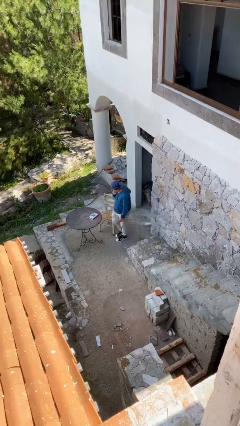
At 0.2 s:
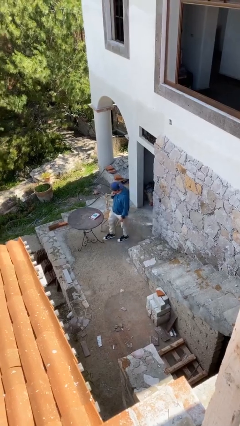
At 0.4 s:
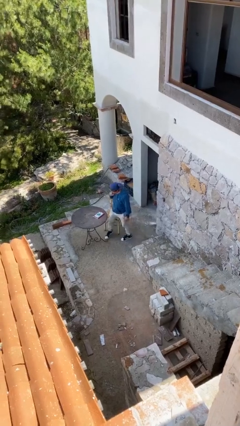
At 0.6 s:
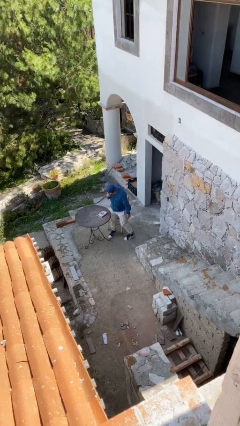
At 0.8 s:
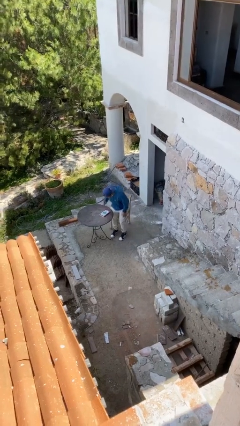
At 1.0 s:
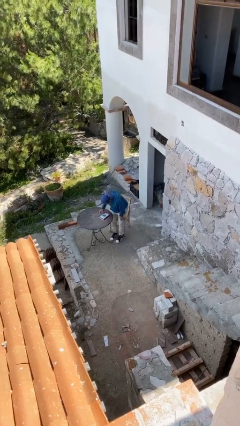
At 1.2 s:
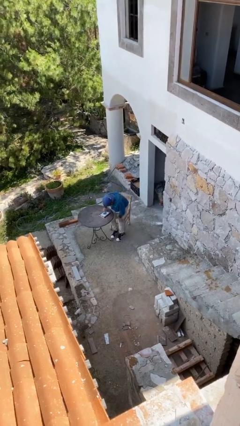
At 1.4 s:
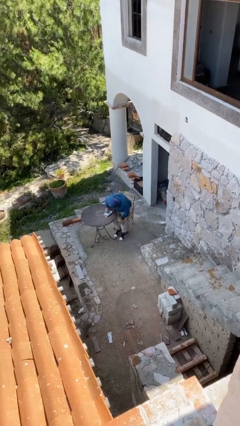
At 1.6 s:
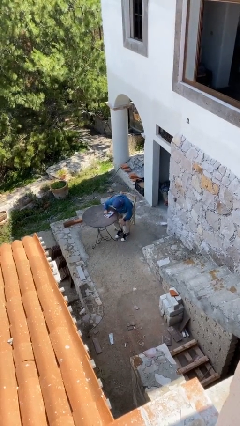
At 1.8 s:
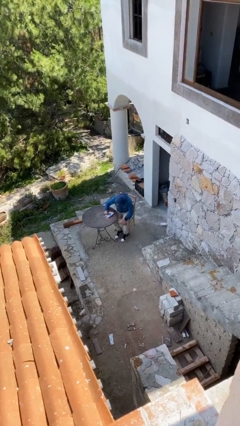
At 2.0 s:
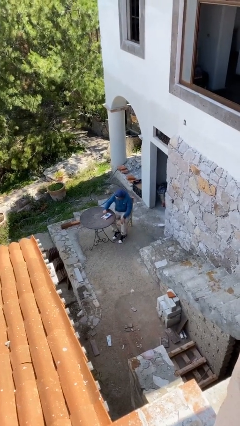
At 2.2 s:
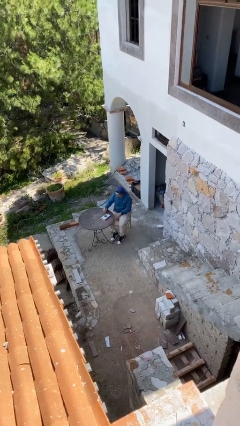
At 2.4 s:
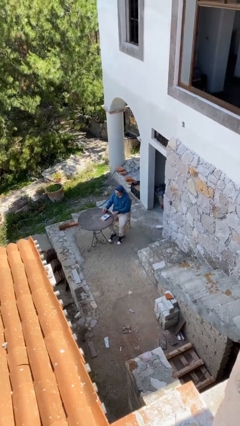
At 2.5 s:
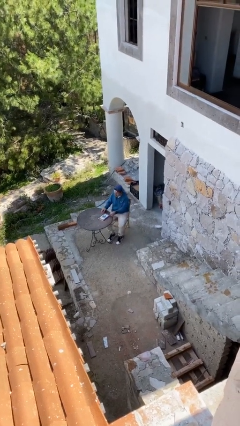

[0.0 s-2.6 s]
person sits down

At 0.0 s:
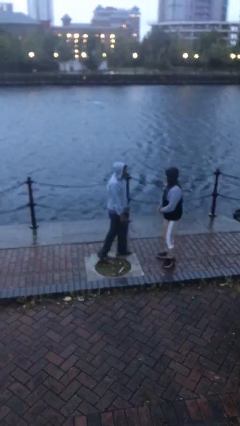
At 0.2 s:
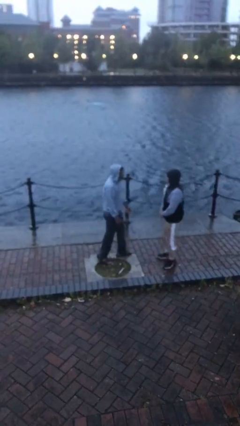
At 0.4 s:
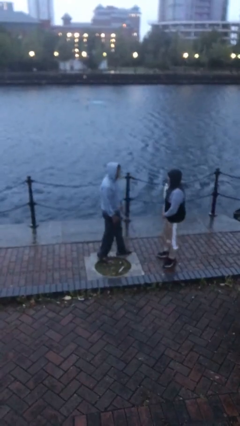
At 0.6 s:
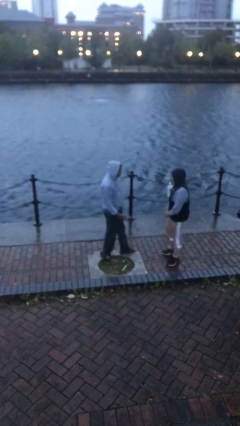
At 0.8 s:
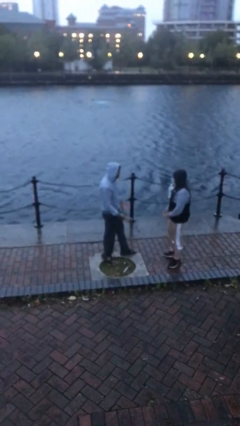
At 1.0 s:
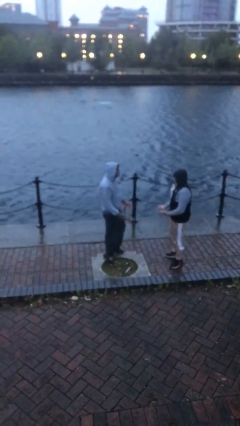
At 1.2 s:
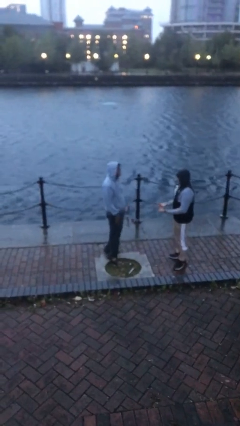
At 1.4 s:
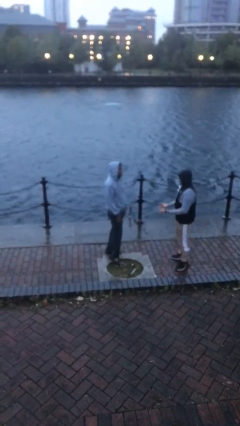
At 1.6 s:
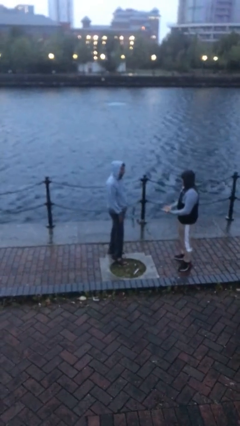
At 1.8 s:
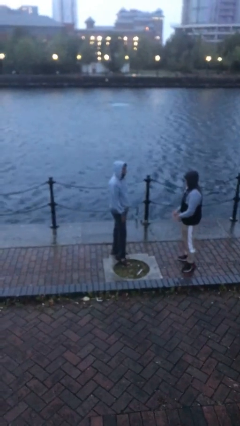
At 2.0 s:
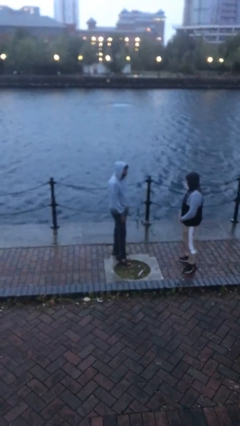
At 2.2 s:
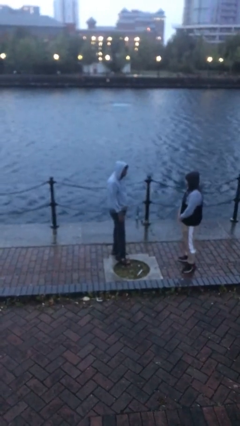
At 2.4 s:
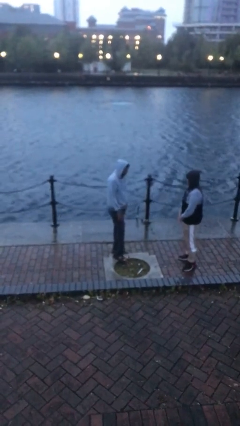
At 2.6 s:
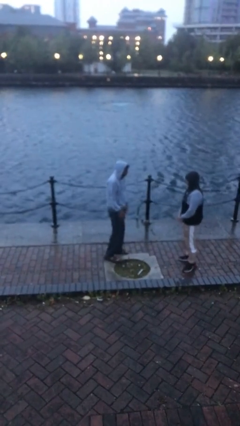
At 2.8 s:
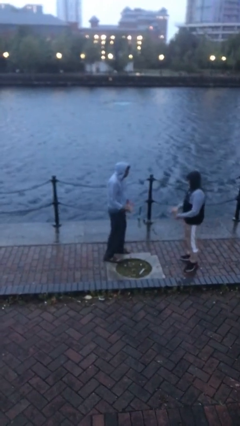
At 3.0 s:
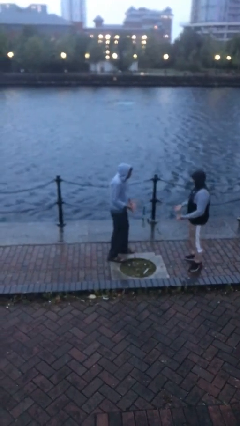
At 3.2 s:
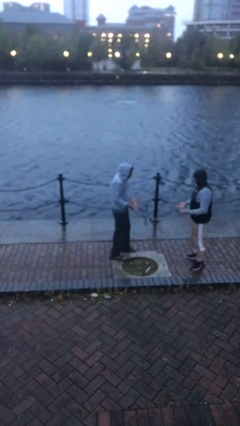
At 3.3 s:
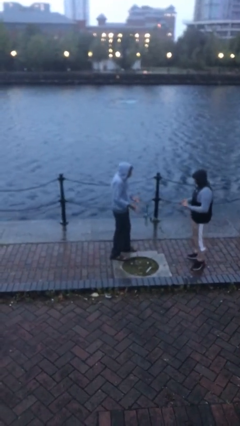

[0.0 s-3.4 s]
person talks to person

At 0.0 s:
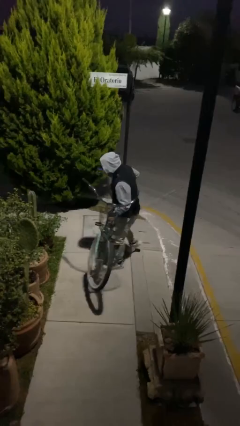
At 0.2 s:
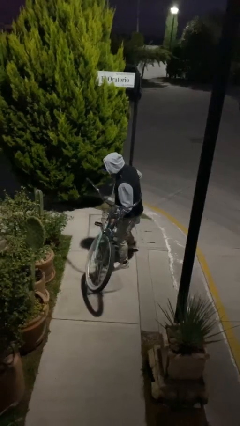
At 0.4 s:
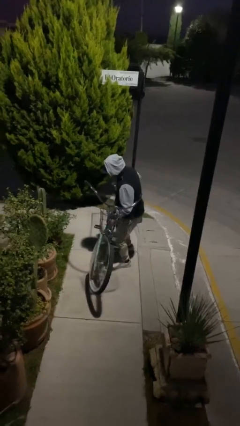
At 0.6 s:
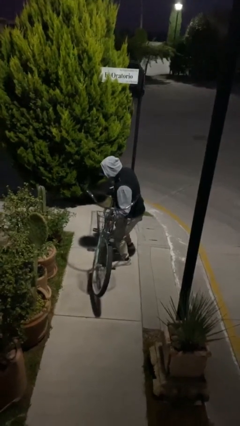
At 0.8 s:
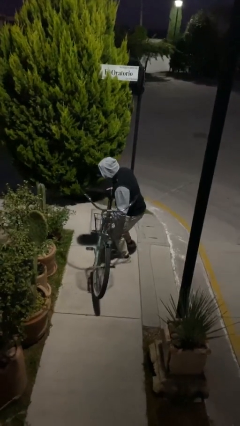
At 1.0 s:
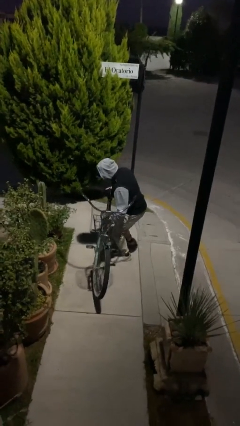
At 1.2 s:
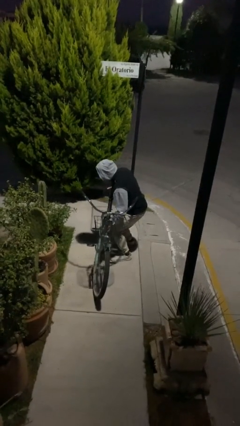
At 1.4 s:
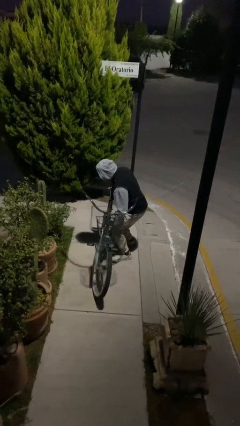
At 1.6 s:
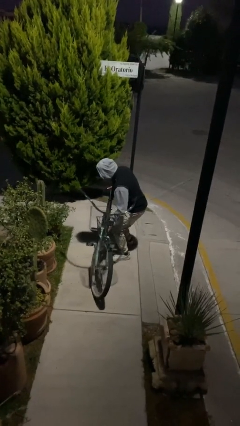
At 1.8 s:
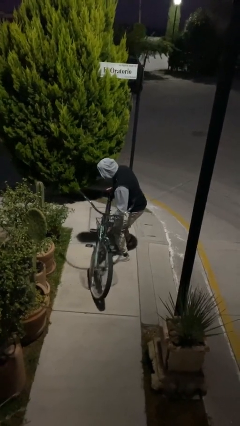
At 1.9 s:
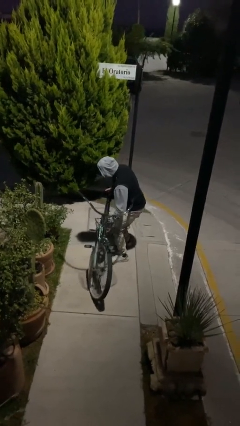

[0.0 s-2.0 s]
person puts down object on floor

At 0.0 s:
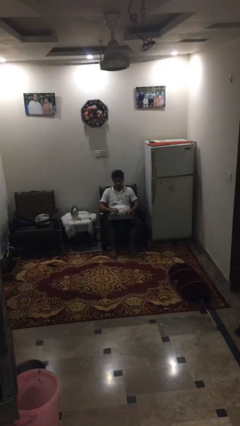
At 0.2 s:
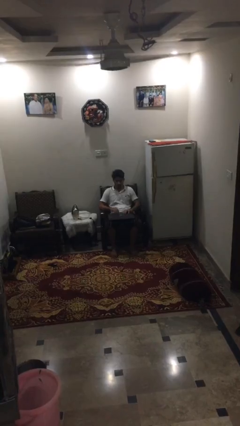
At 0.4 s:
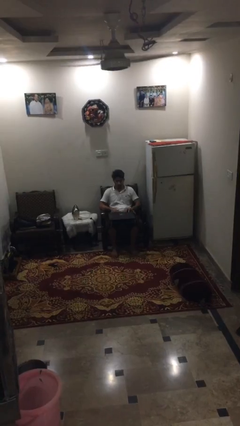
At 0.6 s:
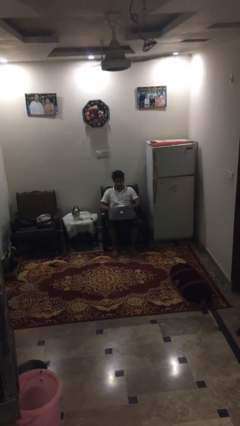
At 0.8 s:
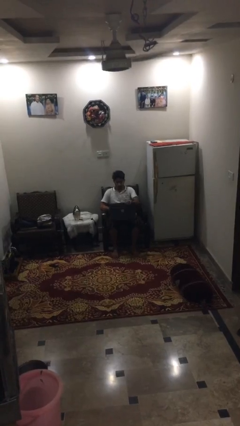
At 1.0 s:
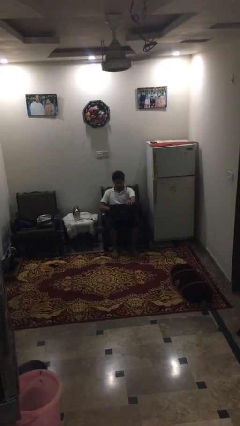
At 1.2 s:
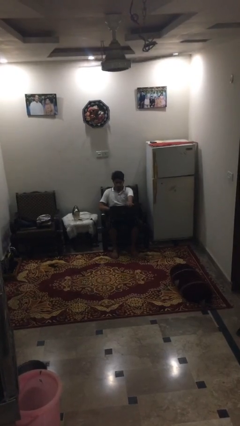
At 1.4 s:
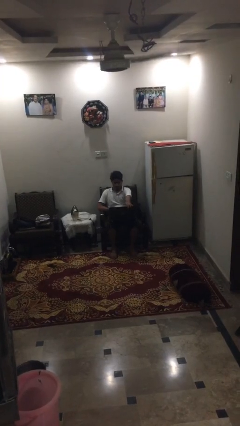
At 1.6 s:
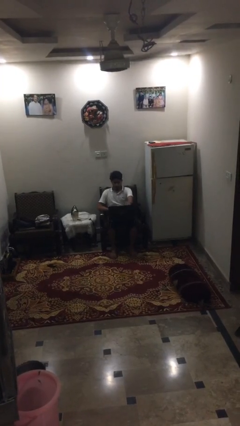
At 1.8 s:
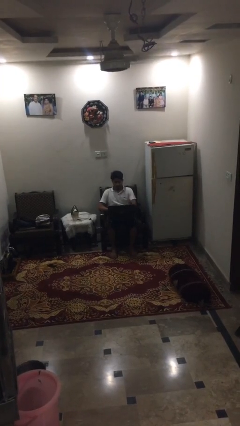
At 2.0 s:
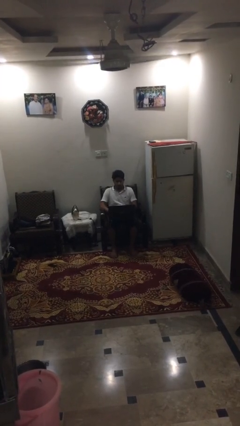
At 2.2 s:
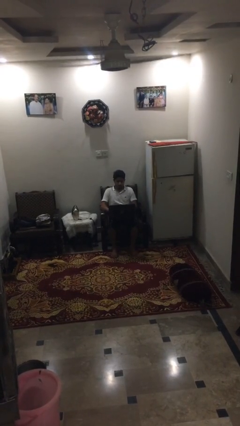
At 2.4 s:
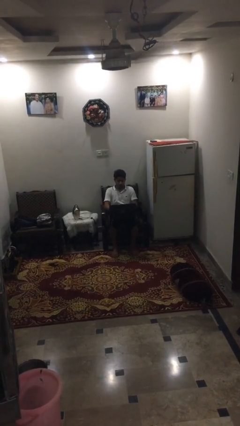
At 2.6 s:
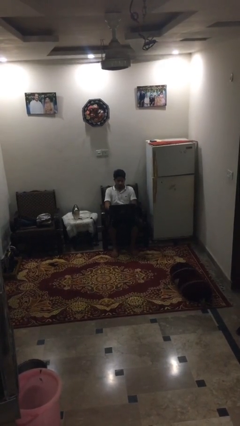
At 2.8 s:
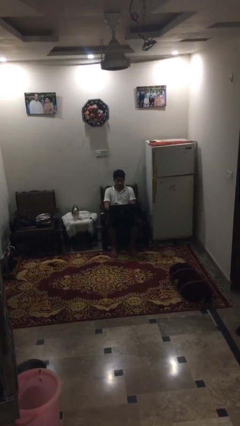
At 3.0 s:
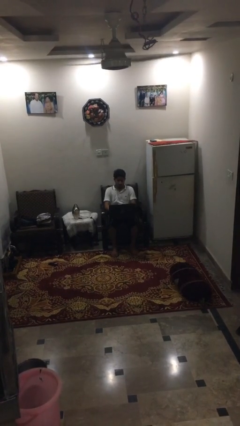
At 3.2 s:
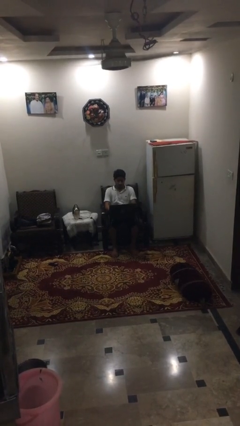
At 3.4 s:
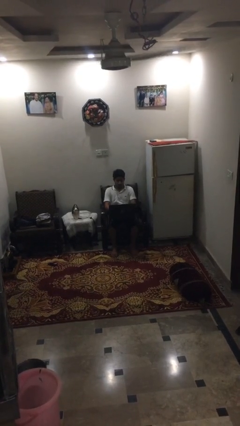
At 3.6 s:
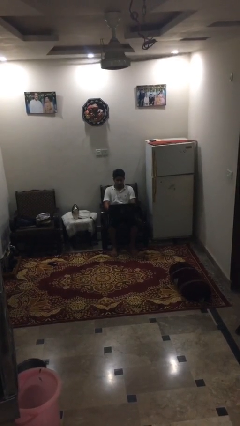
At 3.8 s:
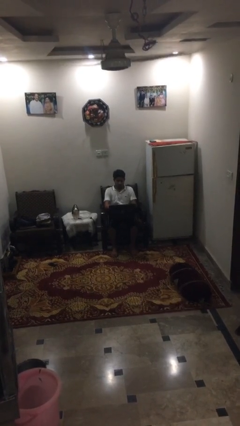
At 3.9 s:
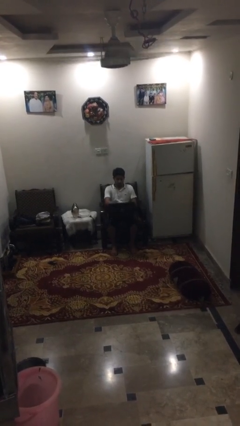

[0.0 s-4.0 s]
person opens laptop

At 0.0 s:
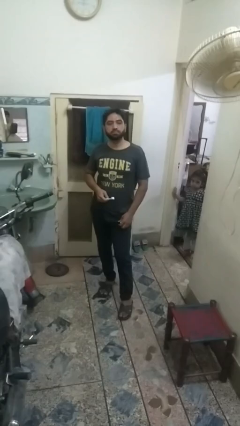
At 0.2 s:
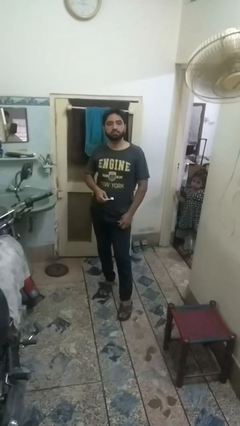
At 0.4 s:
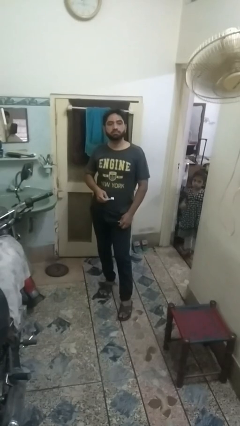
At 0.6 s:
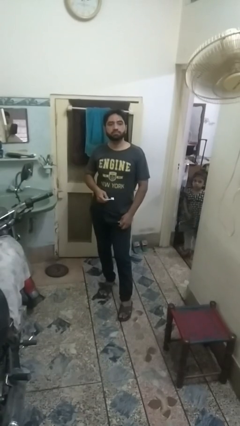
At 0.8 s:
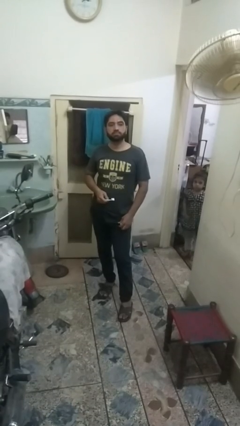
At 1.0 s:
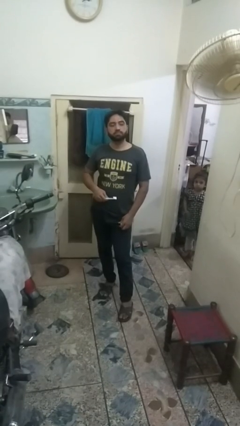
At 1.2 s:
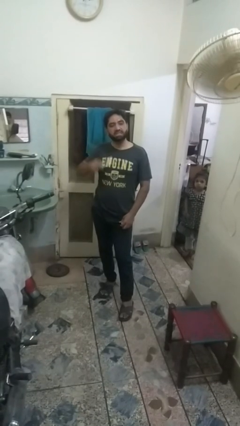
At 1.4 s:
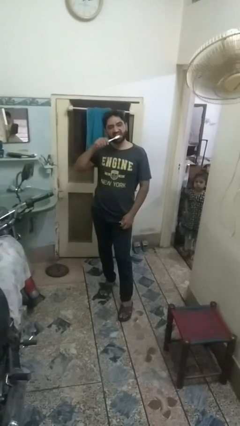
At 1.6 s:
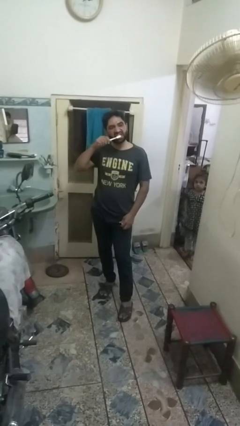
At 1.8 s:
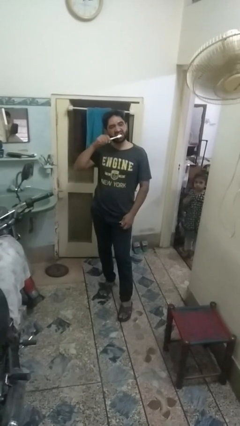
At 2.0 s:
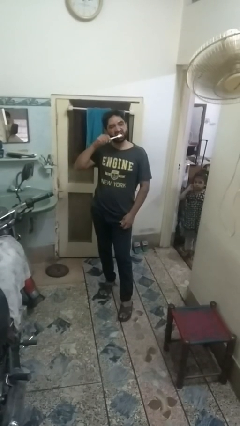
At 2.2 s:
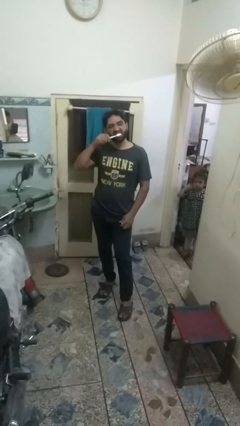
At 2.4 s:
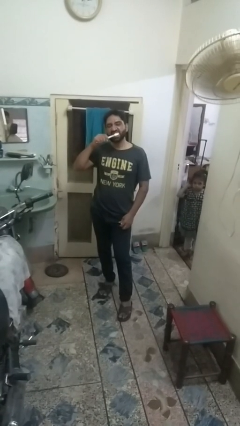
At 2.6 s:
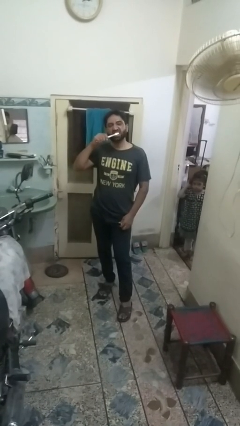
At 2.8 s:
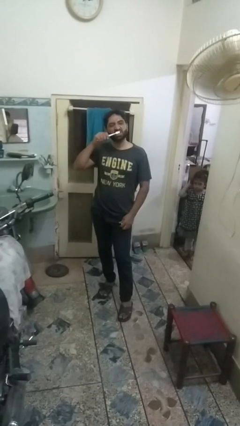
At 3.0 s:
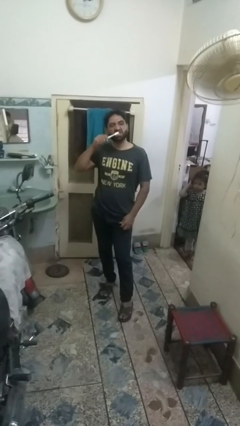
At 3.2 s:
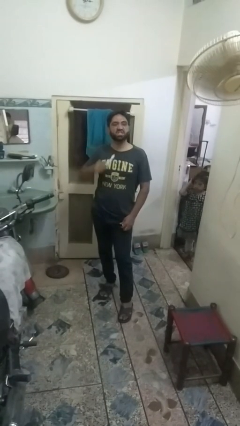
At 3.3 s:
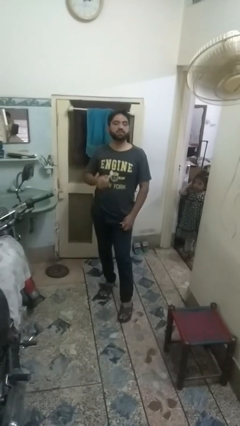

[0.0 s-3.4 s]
person brushes teeth

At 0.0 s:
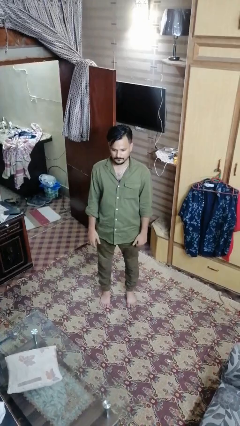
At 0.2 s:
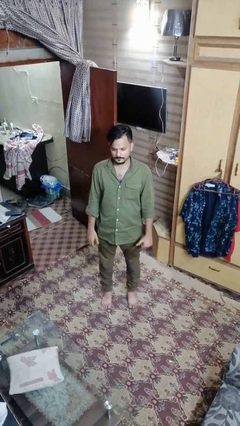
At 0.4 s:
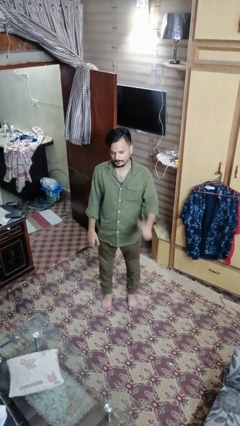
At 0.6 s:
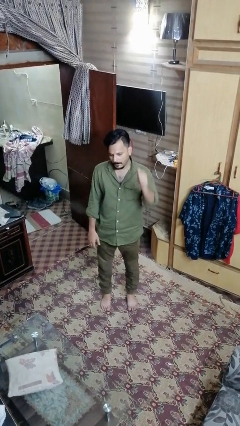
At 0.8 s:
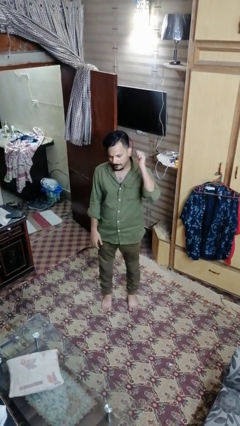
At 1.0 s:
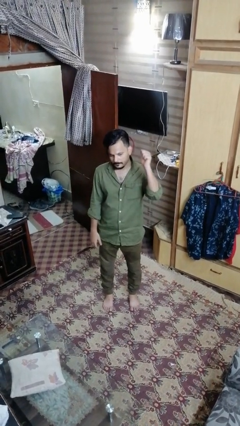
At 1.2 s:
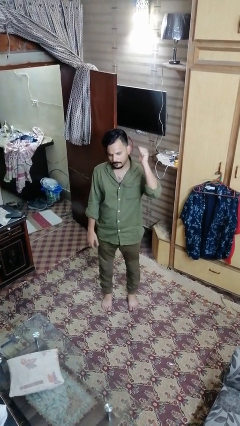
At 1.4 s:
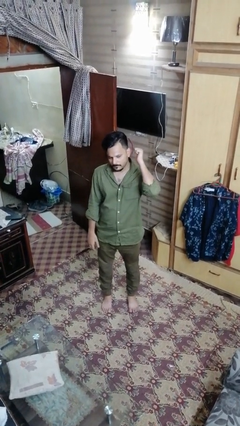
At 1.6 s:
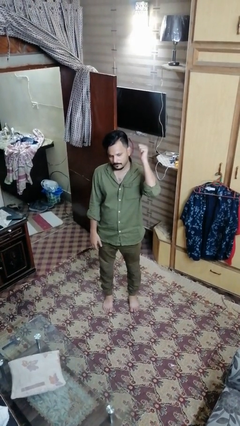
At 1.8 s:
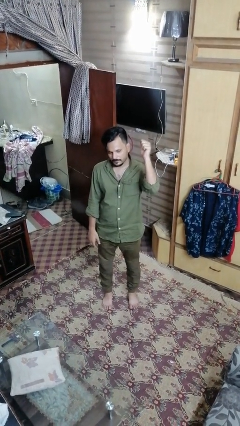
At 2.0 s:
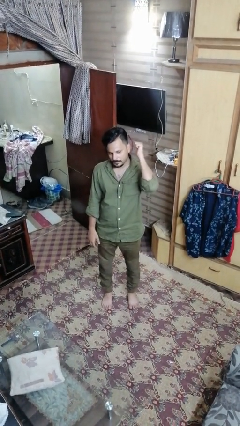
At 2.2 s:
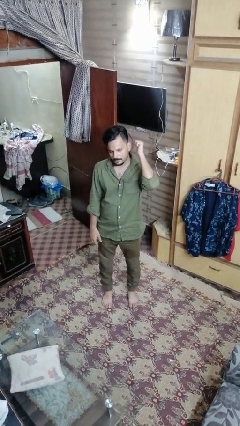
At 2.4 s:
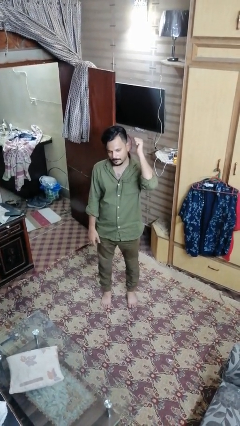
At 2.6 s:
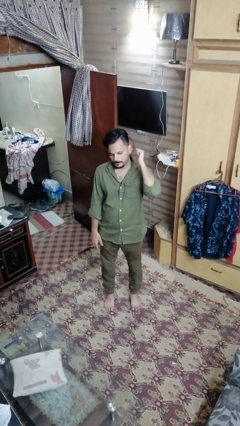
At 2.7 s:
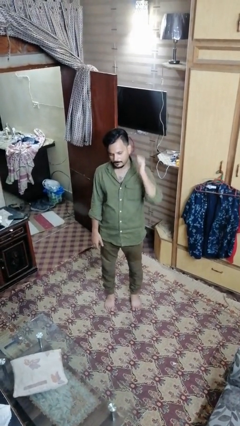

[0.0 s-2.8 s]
person gestures behind me
